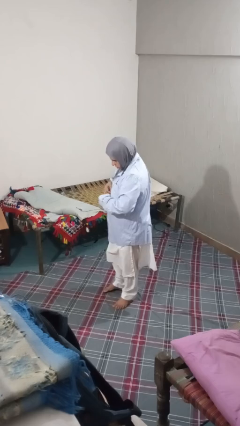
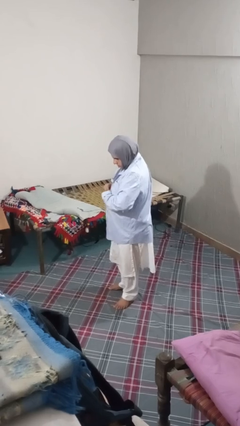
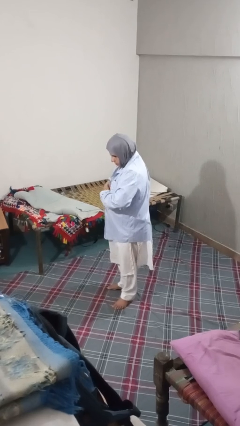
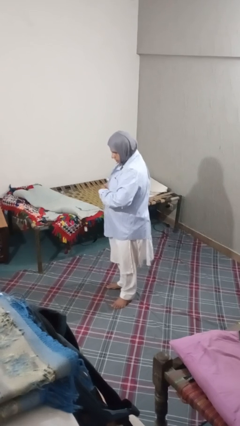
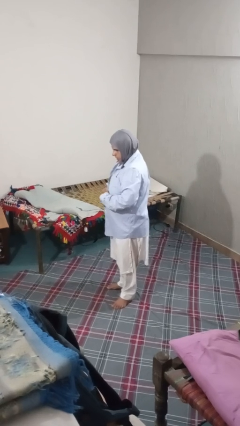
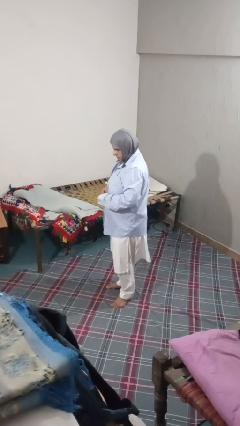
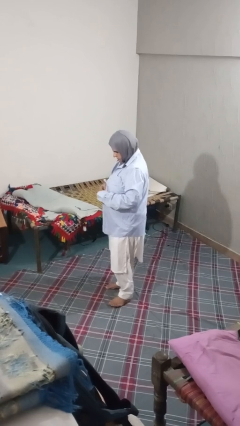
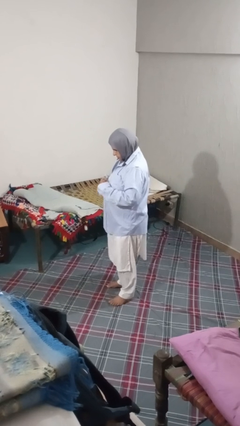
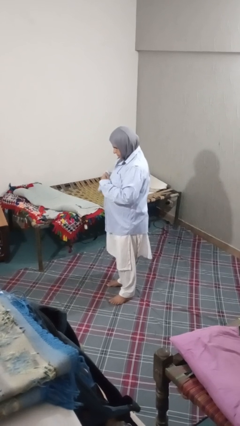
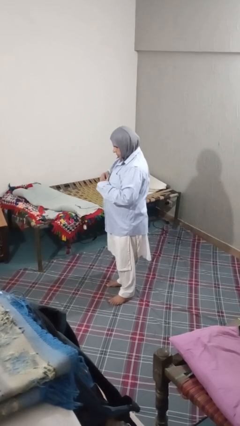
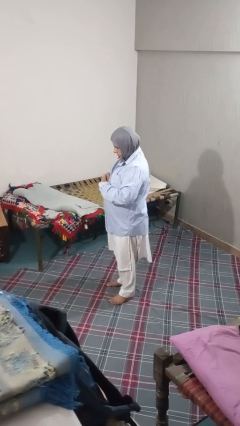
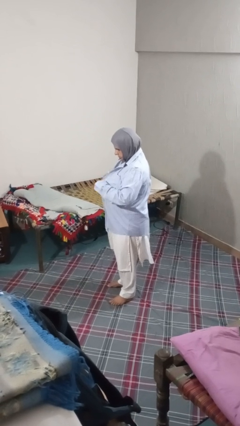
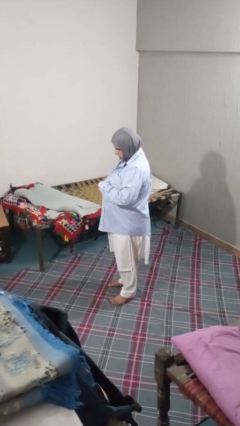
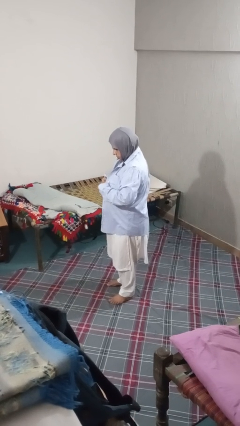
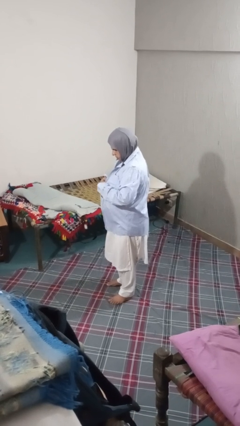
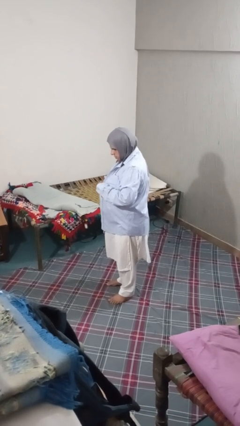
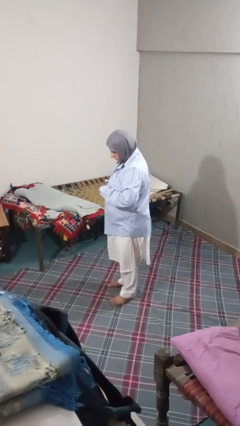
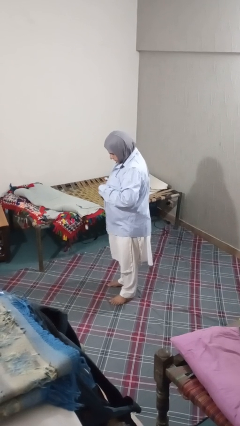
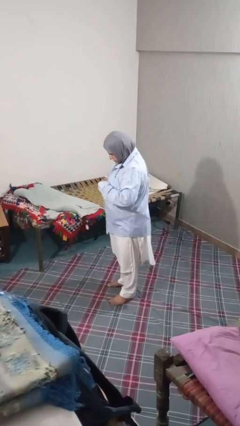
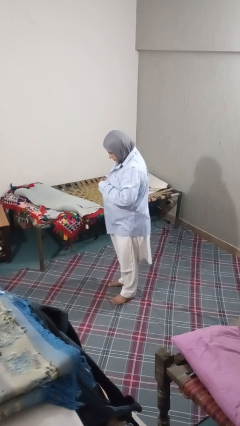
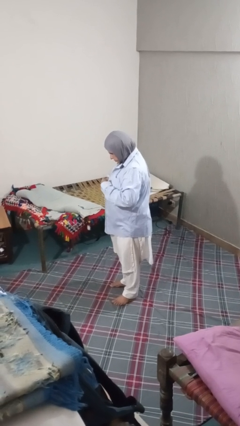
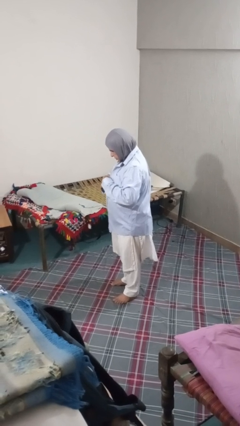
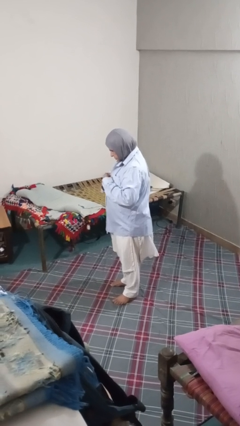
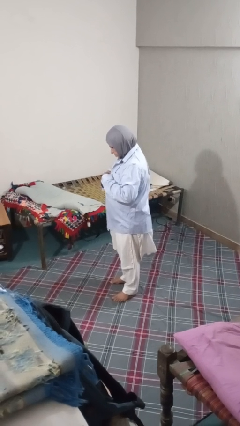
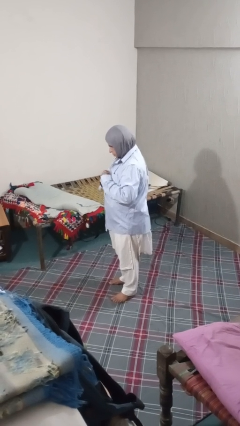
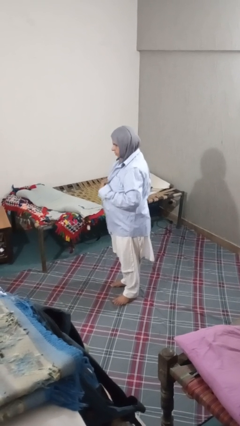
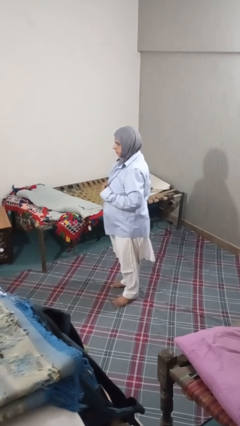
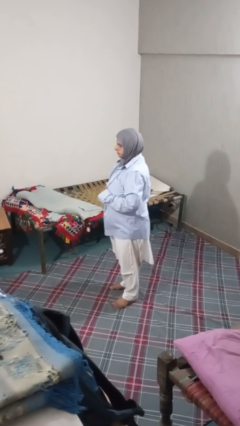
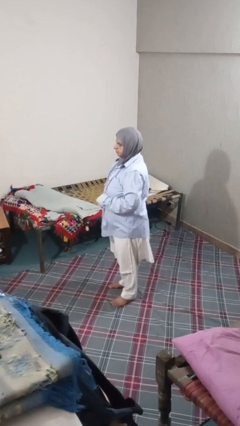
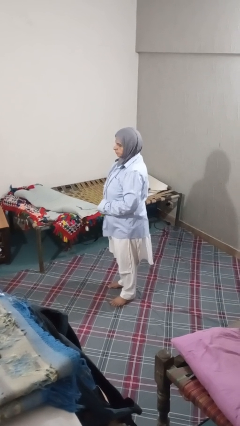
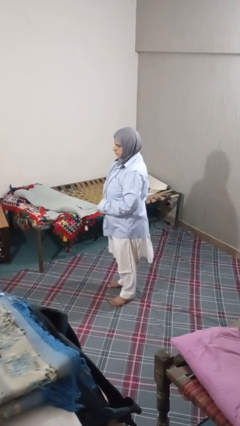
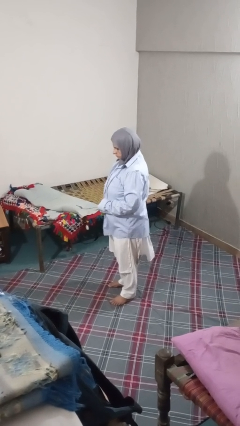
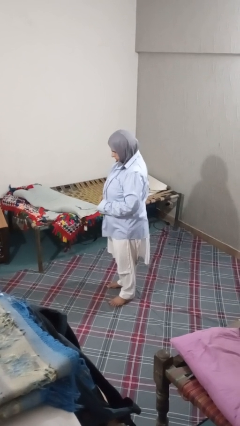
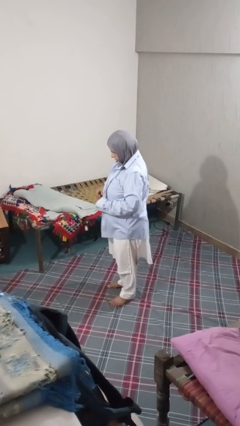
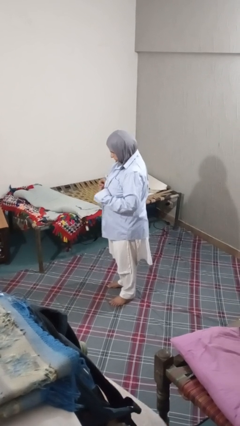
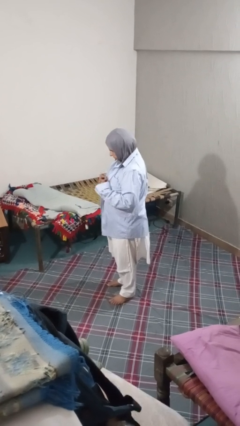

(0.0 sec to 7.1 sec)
person unbuttons shirt

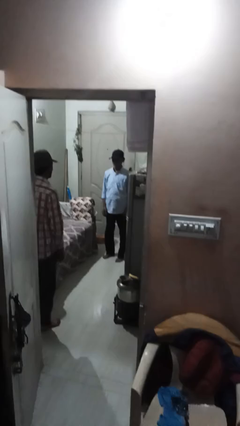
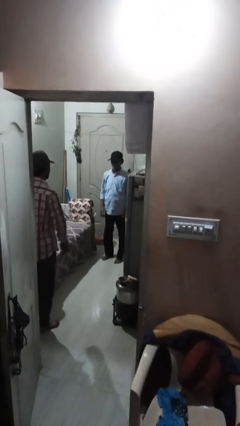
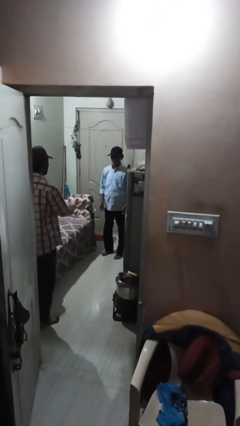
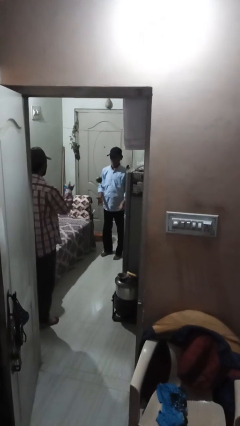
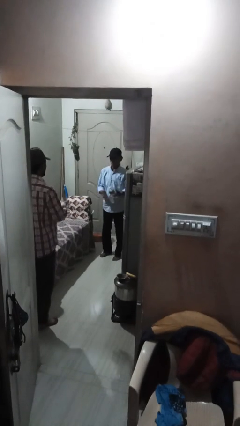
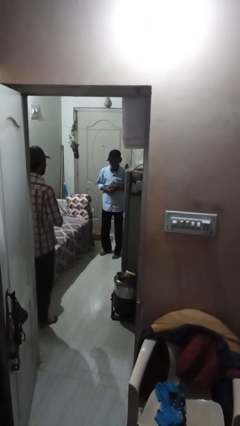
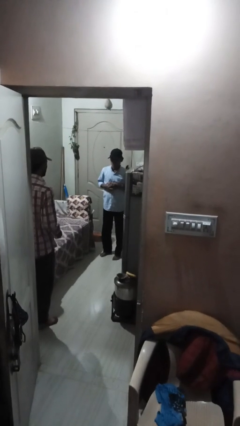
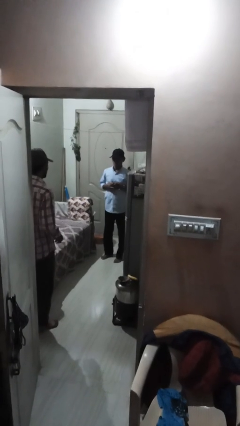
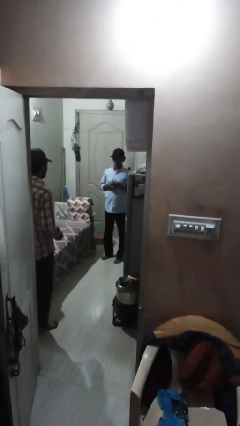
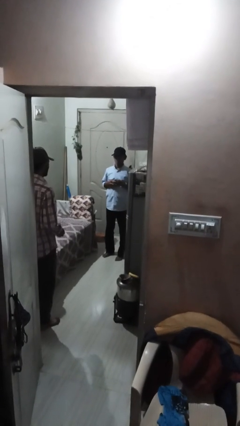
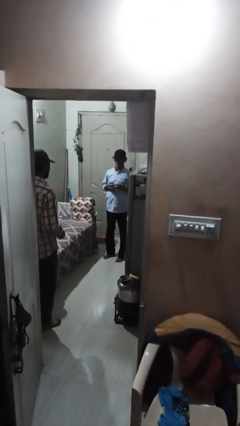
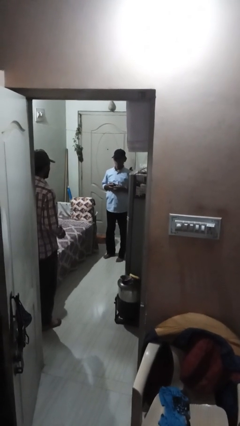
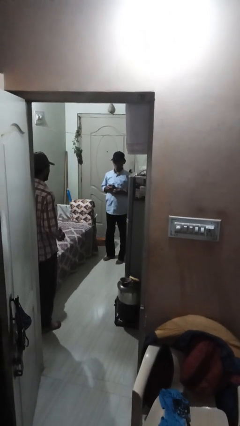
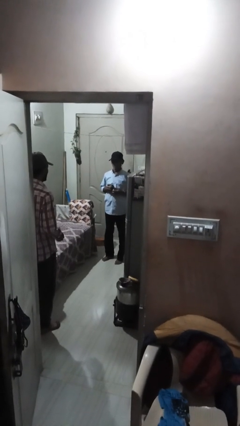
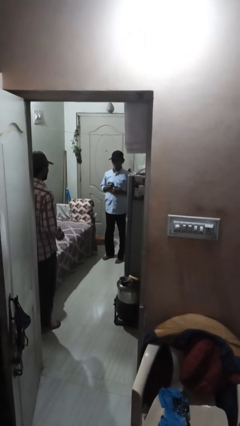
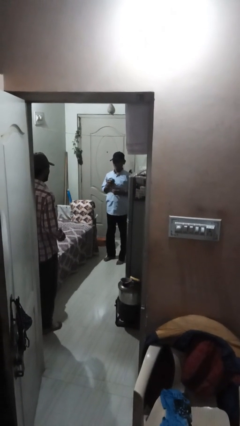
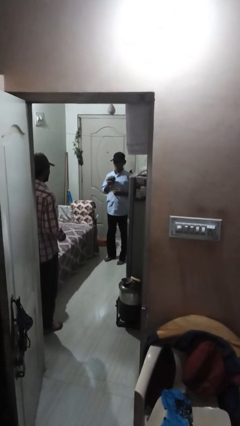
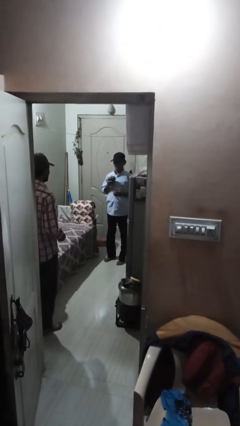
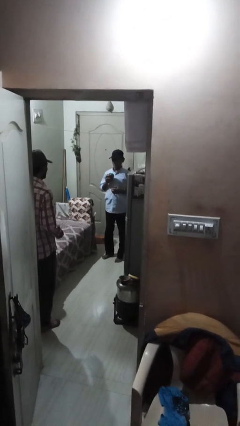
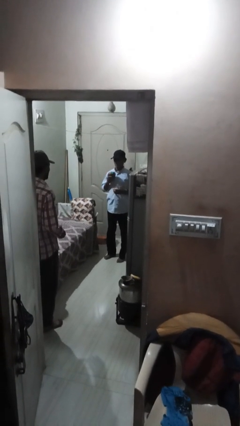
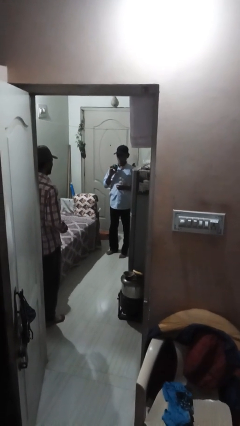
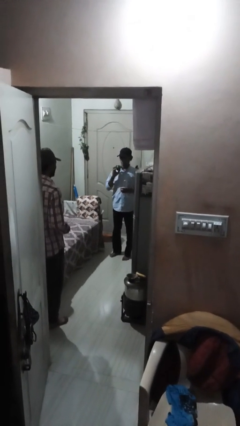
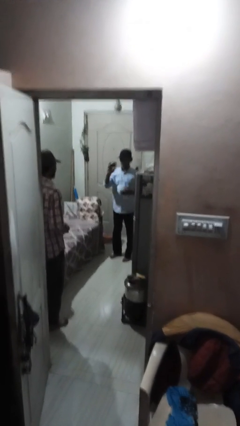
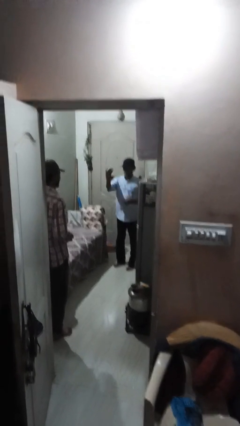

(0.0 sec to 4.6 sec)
person catches object from person

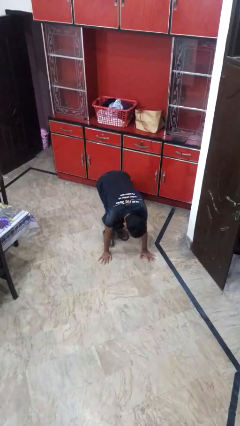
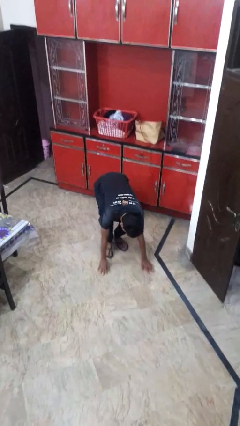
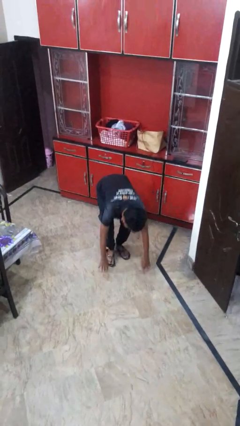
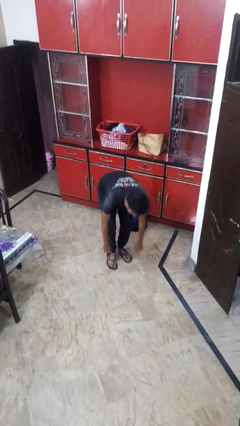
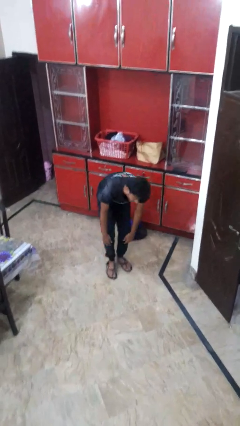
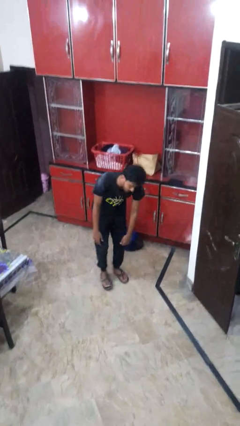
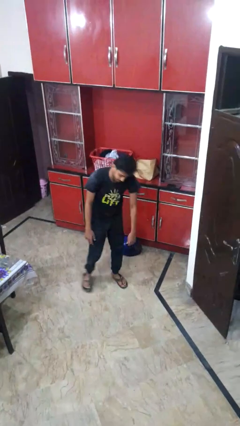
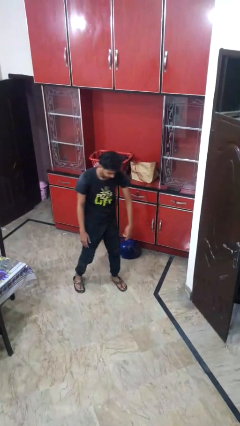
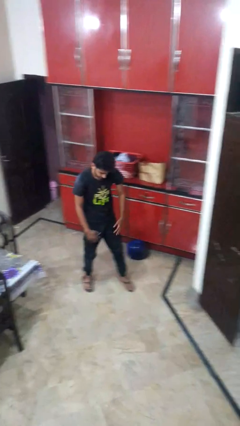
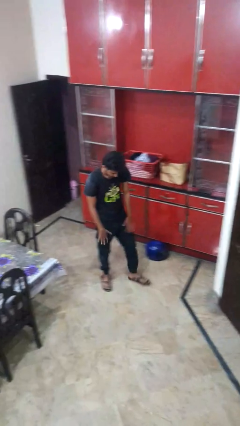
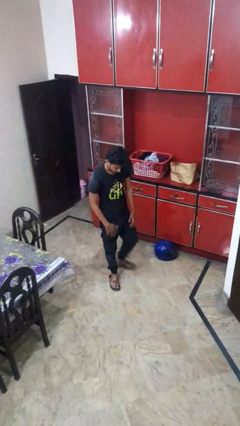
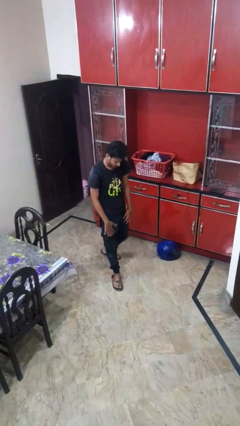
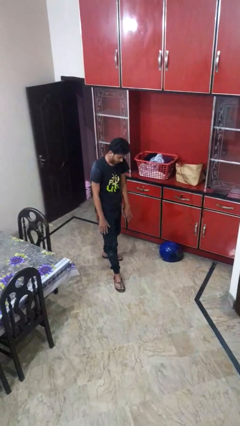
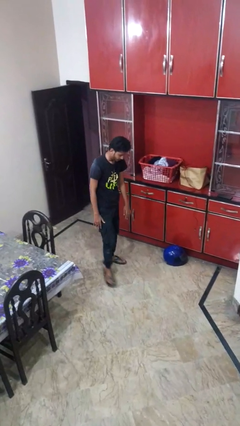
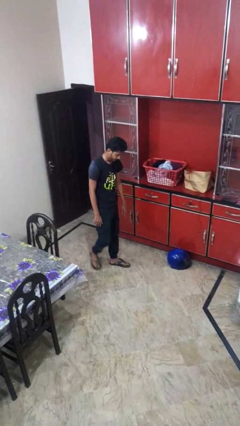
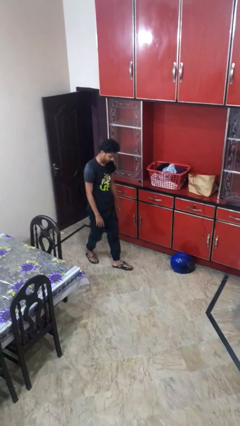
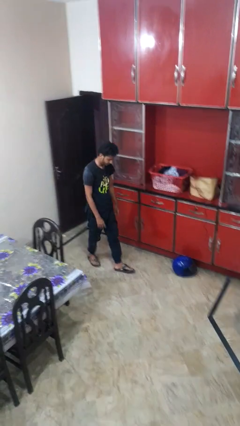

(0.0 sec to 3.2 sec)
person stands up from floor

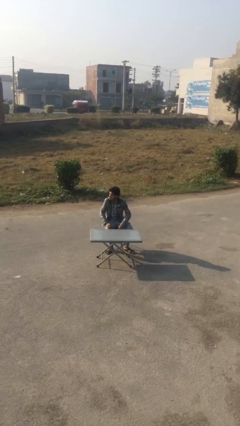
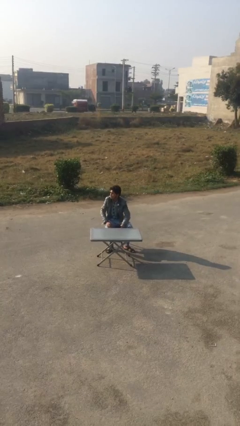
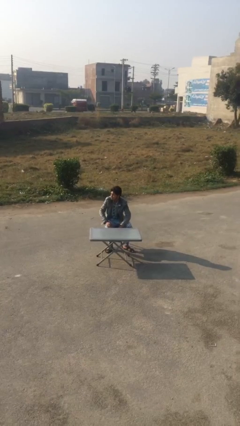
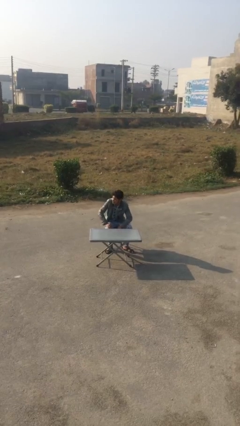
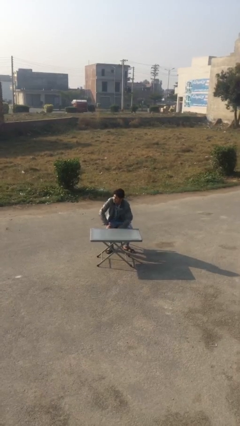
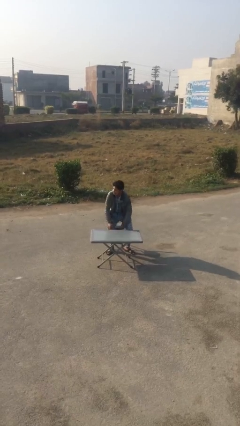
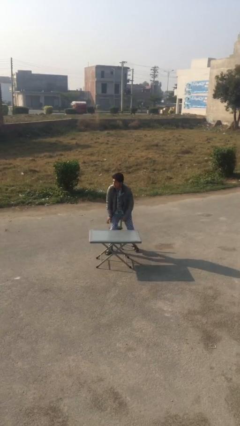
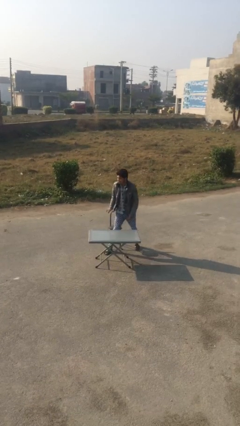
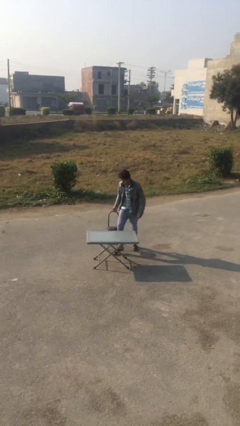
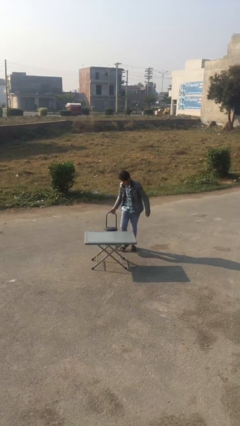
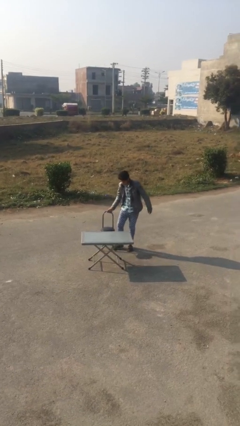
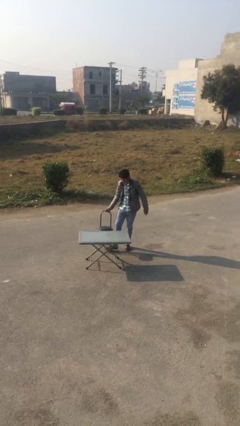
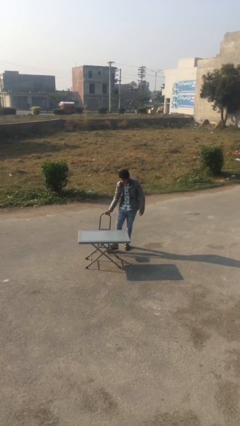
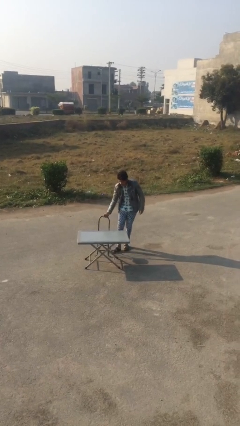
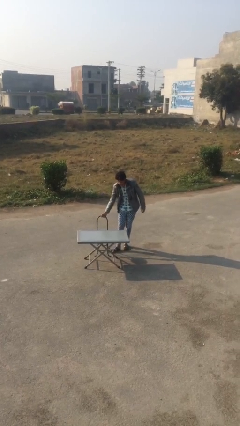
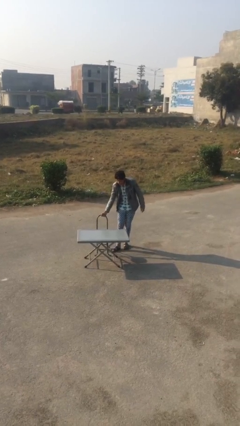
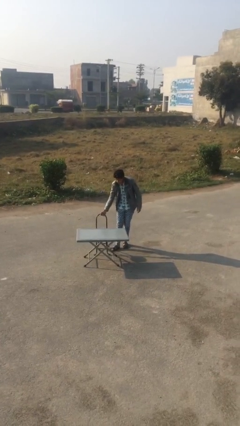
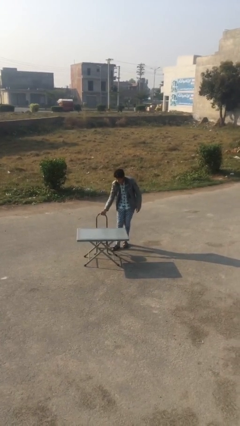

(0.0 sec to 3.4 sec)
person stands up
